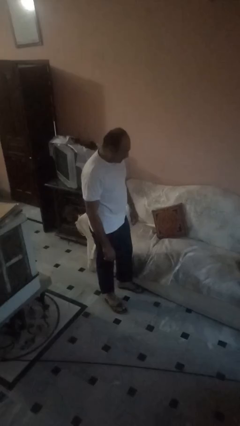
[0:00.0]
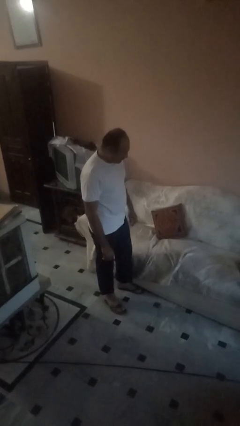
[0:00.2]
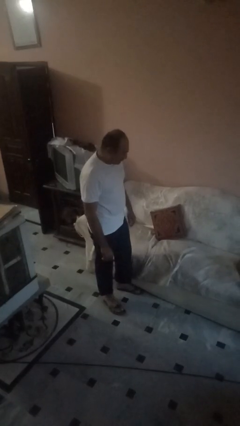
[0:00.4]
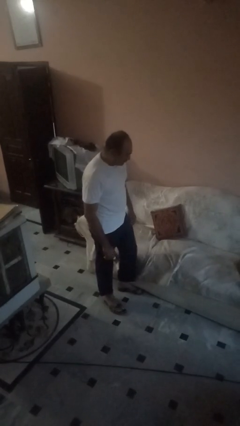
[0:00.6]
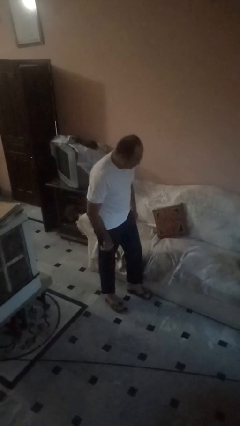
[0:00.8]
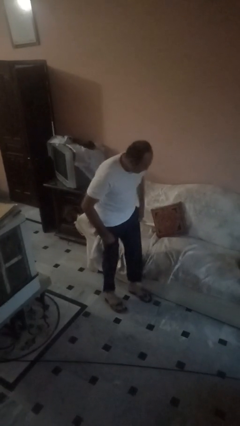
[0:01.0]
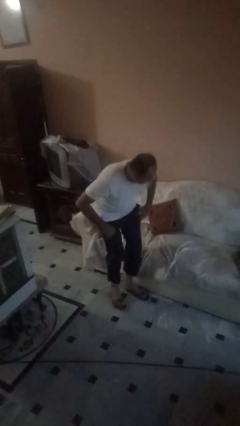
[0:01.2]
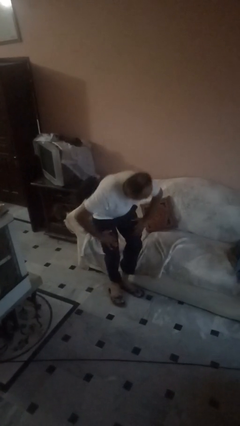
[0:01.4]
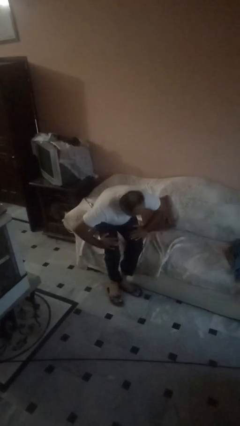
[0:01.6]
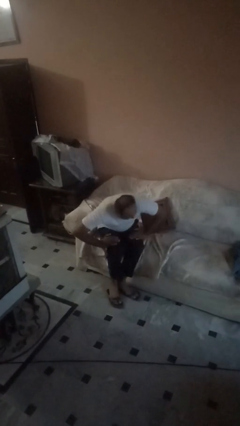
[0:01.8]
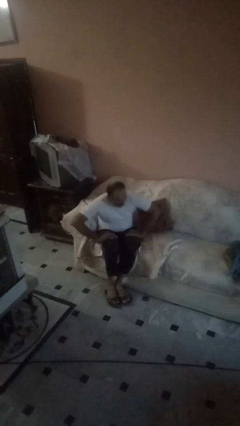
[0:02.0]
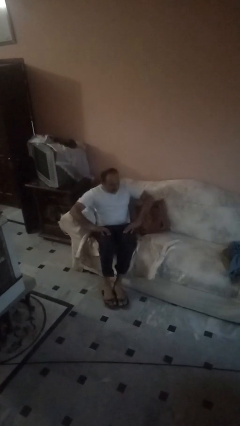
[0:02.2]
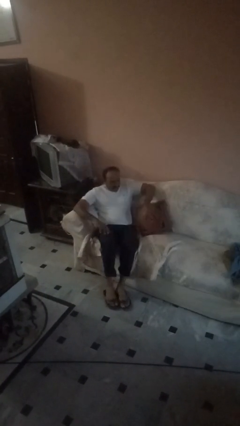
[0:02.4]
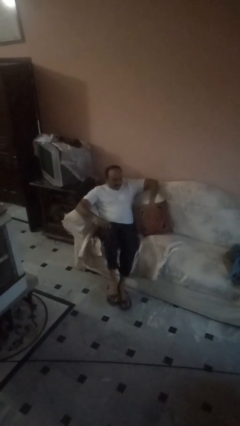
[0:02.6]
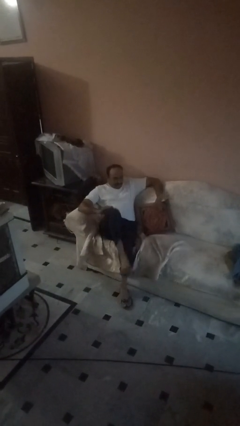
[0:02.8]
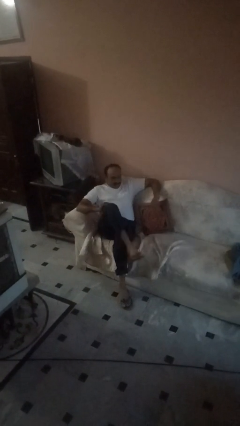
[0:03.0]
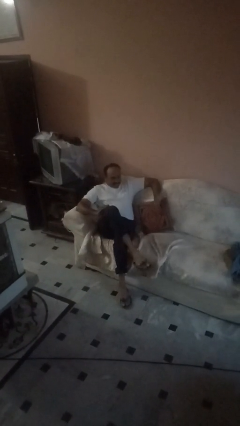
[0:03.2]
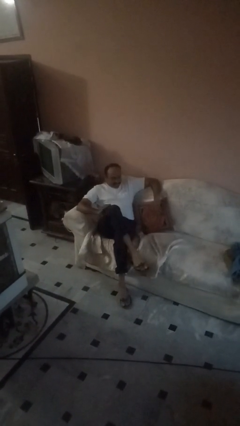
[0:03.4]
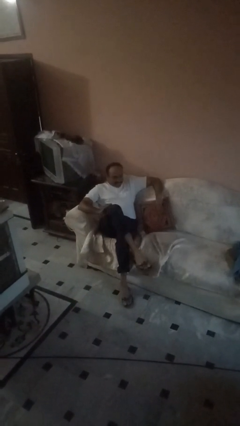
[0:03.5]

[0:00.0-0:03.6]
person lies down on couch

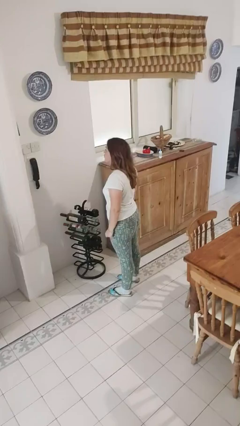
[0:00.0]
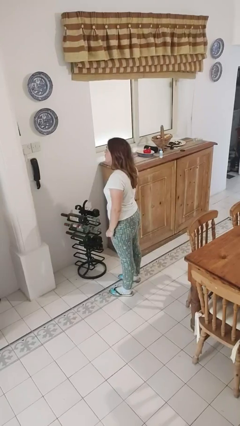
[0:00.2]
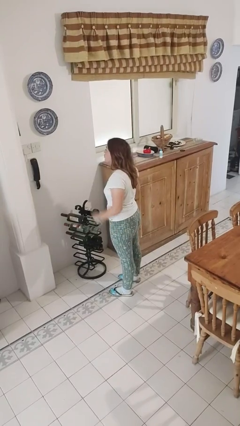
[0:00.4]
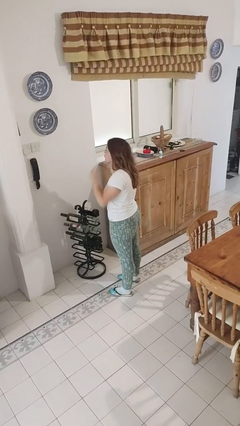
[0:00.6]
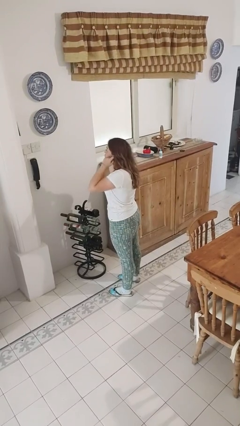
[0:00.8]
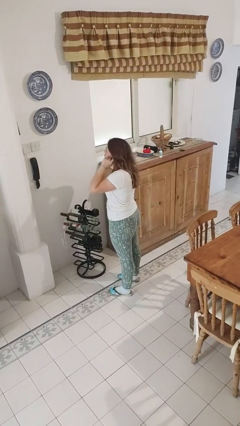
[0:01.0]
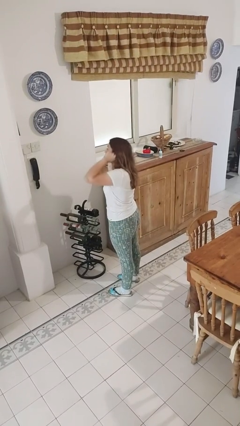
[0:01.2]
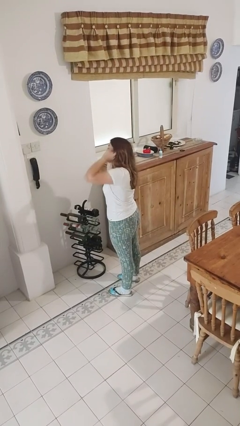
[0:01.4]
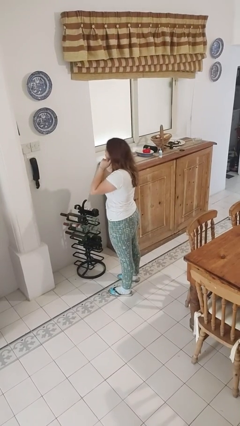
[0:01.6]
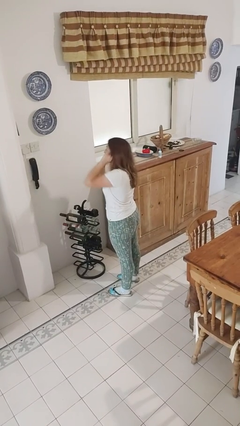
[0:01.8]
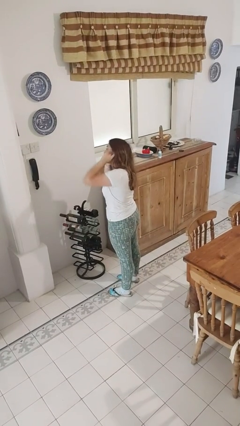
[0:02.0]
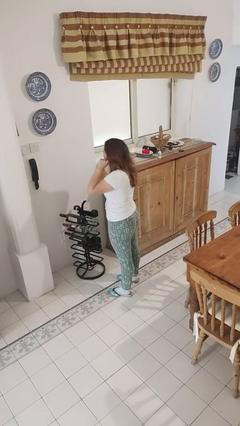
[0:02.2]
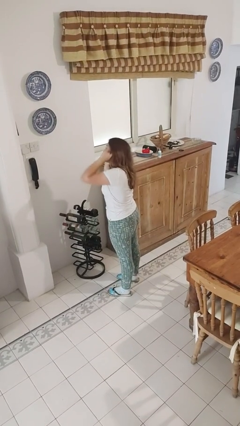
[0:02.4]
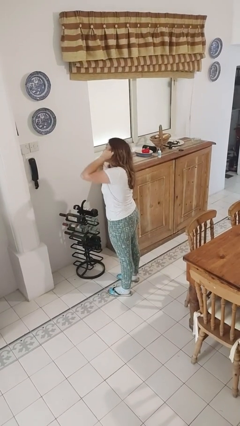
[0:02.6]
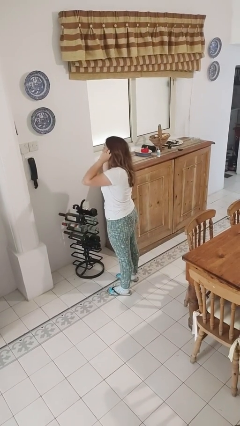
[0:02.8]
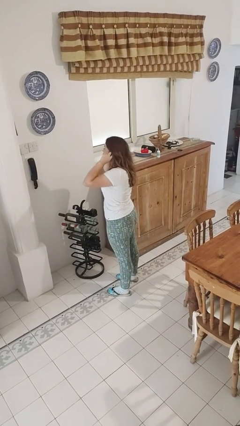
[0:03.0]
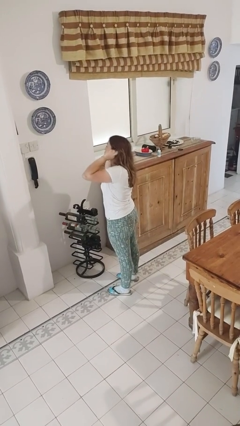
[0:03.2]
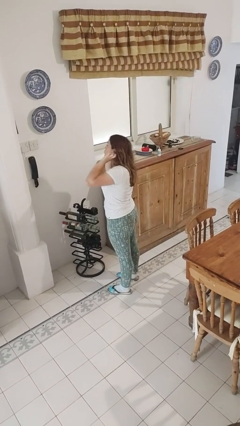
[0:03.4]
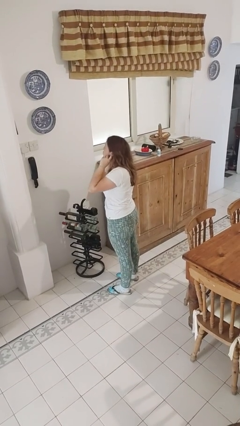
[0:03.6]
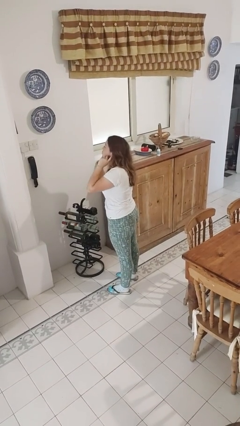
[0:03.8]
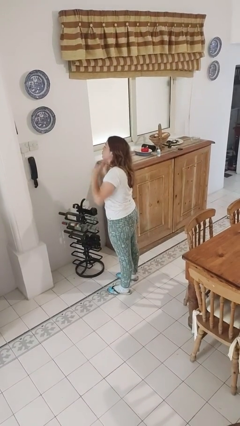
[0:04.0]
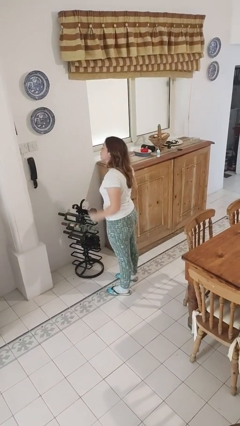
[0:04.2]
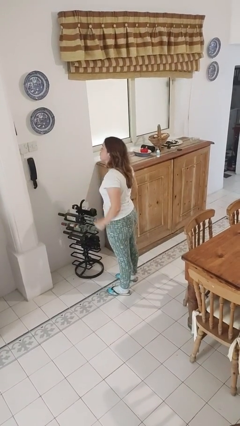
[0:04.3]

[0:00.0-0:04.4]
person puts fingers in ear

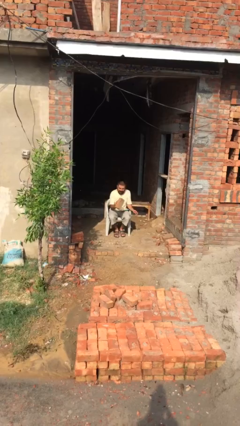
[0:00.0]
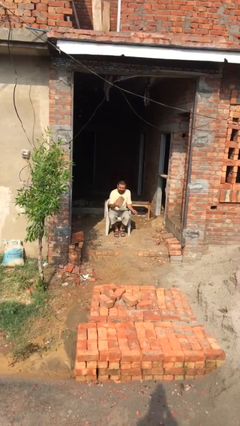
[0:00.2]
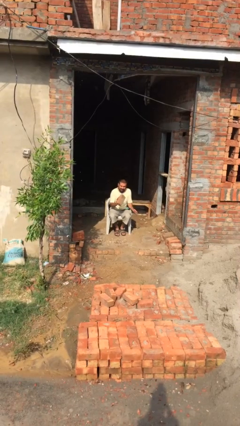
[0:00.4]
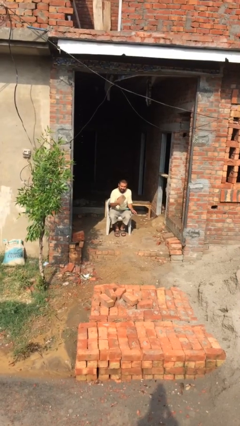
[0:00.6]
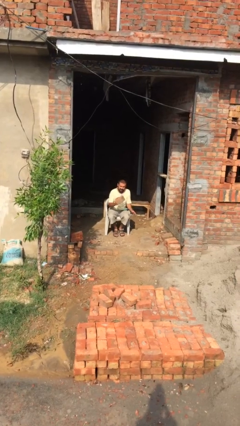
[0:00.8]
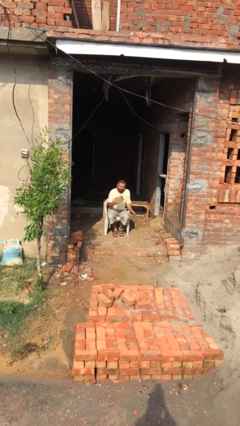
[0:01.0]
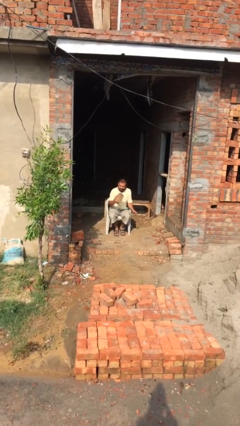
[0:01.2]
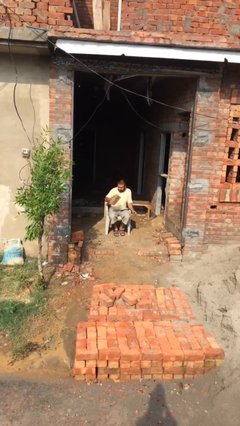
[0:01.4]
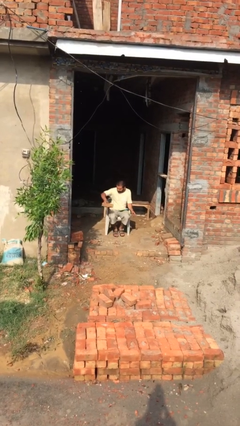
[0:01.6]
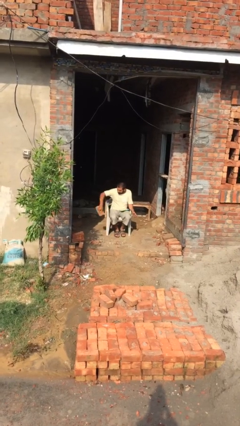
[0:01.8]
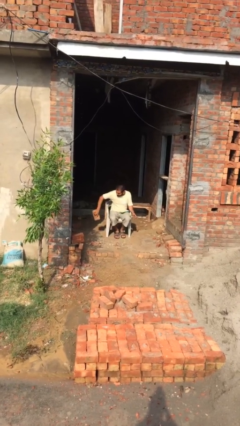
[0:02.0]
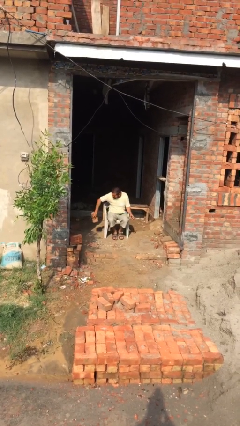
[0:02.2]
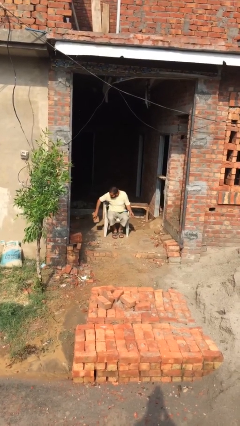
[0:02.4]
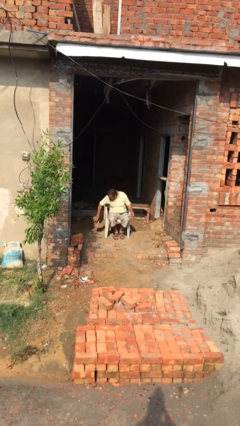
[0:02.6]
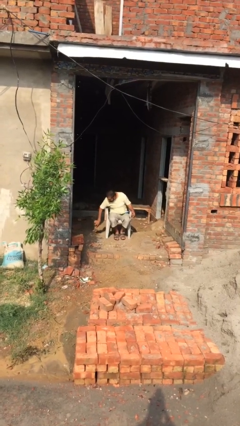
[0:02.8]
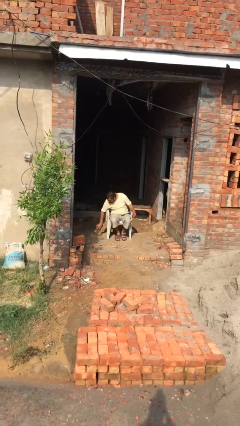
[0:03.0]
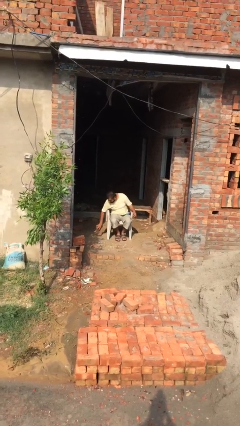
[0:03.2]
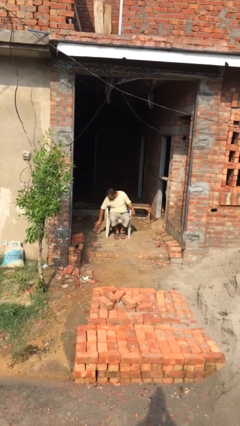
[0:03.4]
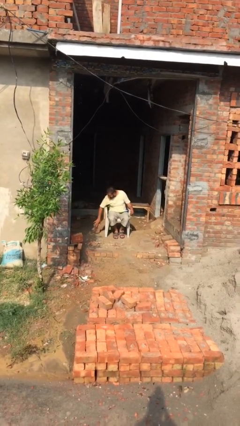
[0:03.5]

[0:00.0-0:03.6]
person puts down object on floor

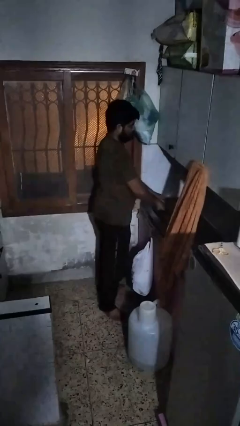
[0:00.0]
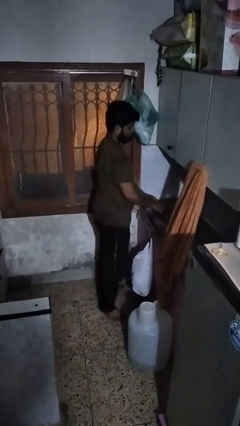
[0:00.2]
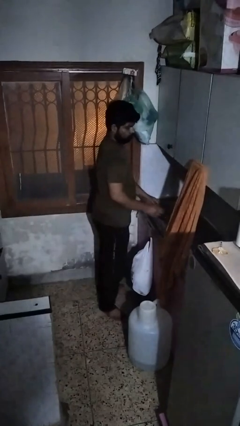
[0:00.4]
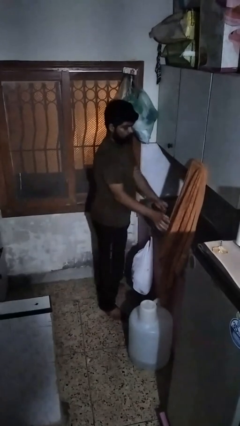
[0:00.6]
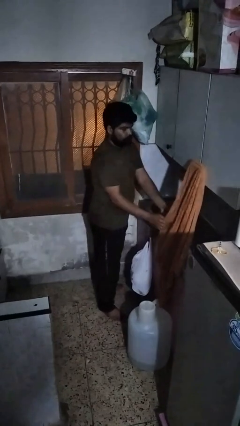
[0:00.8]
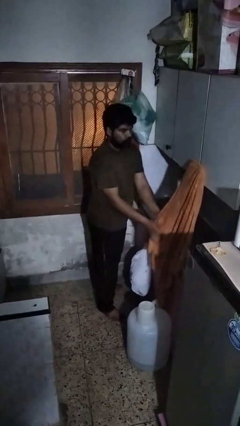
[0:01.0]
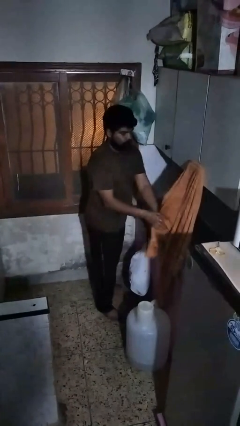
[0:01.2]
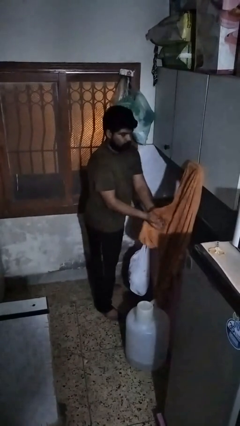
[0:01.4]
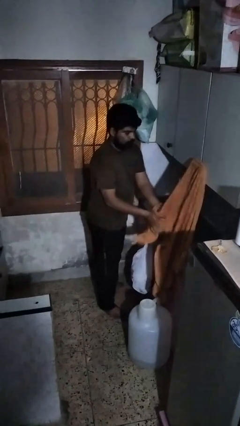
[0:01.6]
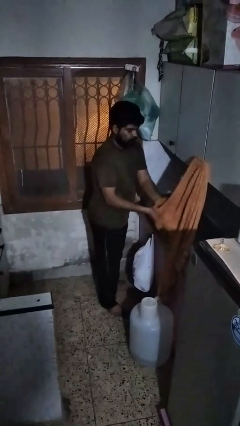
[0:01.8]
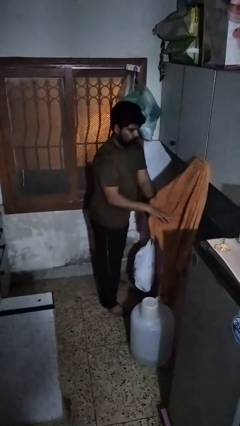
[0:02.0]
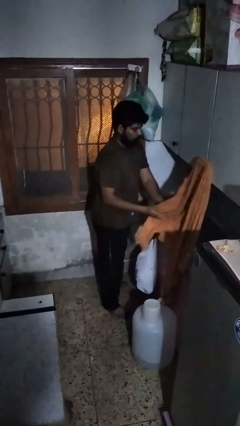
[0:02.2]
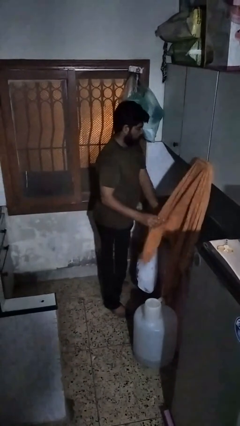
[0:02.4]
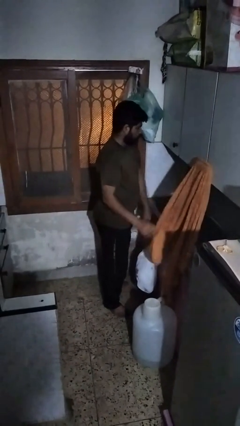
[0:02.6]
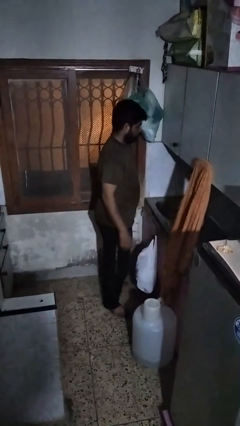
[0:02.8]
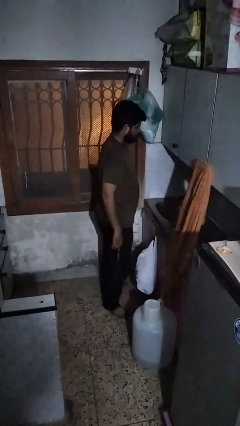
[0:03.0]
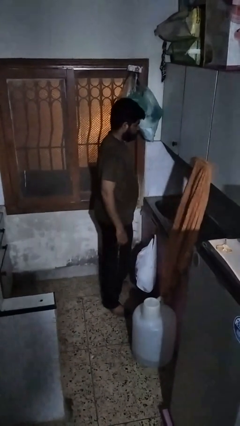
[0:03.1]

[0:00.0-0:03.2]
person dries hands with towel

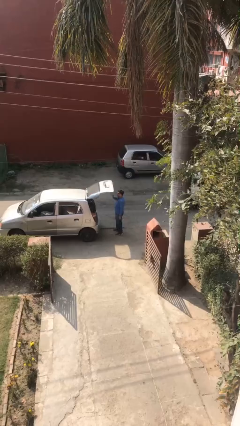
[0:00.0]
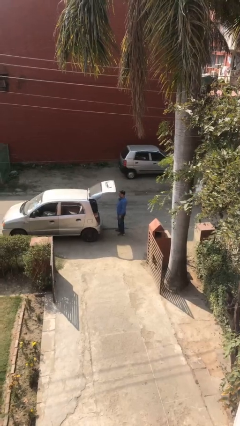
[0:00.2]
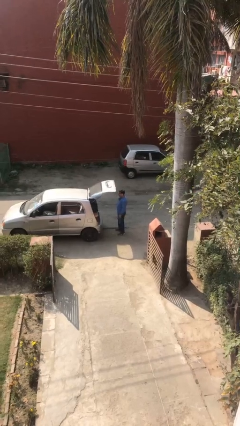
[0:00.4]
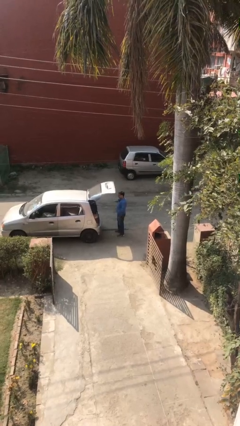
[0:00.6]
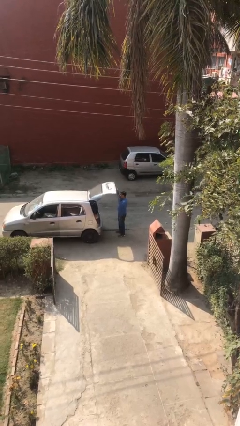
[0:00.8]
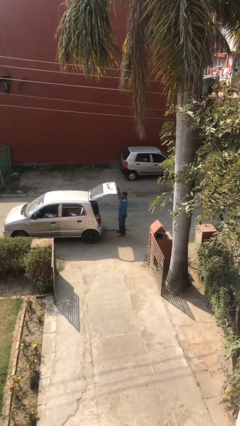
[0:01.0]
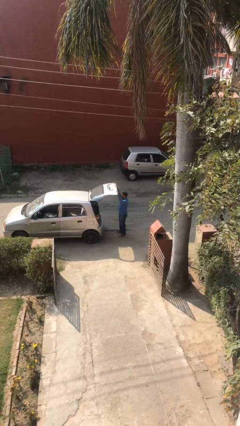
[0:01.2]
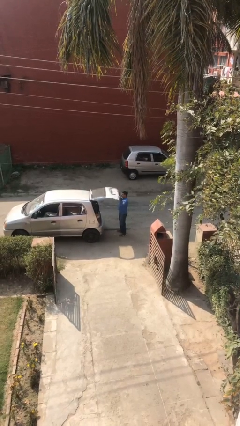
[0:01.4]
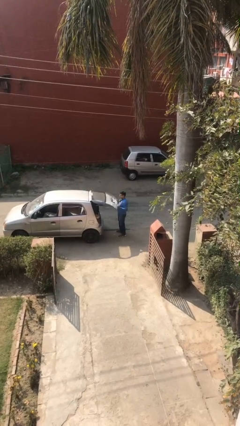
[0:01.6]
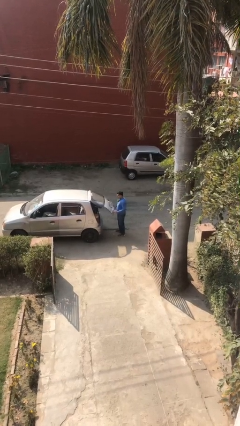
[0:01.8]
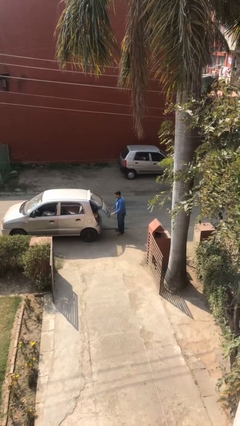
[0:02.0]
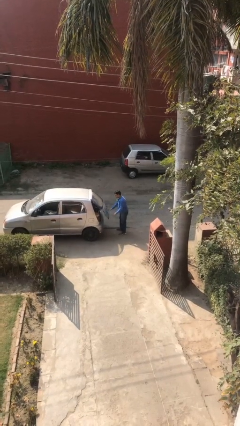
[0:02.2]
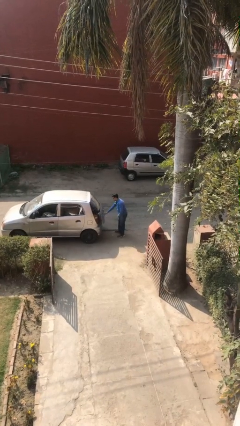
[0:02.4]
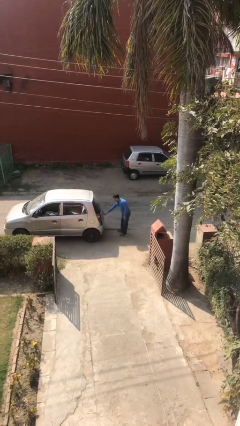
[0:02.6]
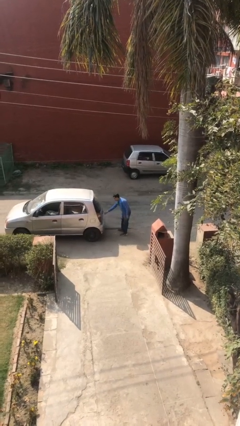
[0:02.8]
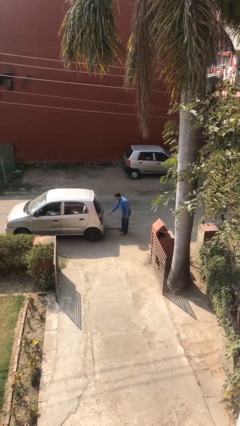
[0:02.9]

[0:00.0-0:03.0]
person closes car trunk
